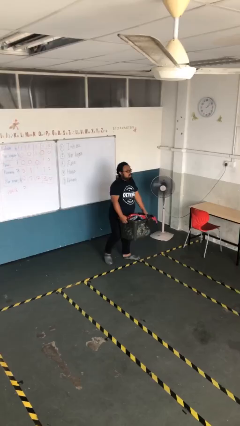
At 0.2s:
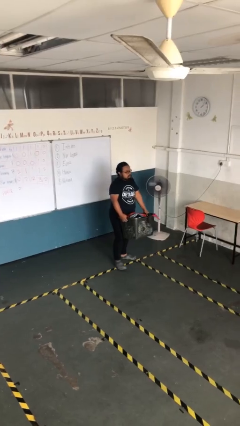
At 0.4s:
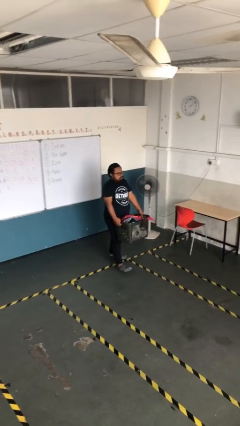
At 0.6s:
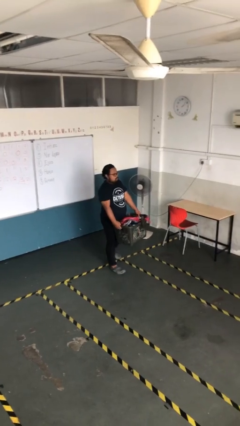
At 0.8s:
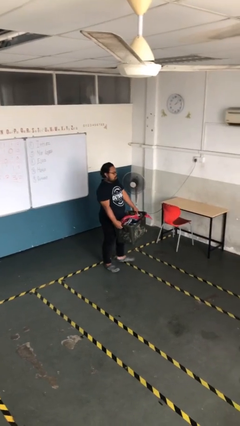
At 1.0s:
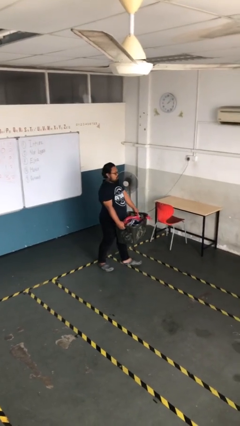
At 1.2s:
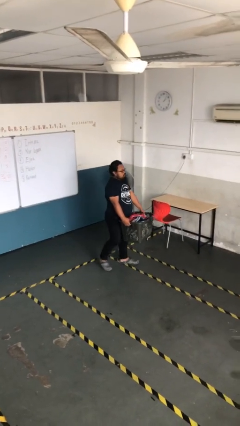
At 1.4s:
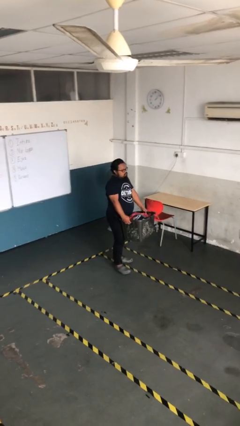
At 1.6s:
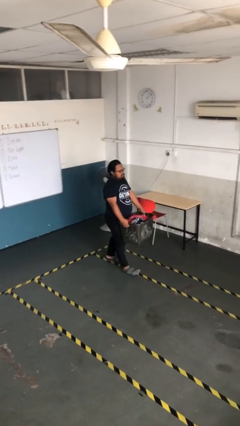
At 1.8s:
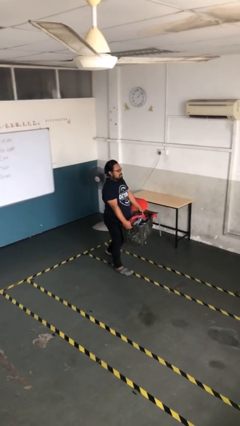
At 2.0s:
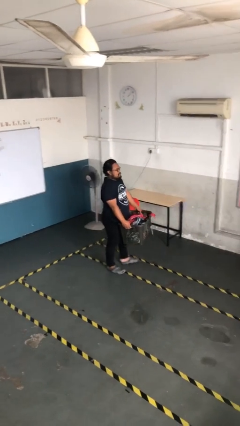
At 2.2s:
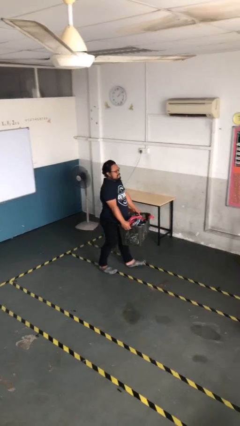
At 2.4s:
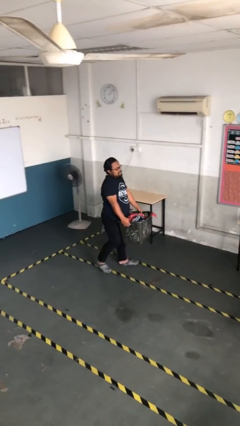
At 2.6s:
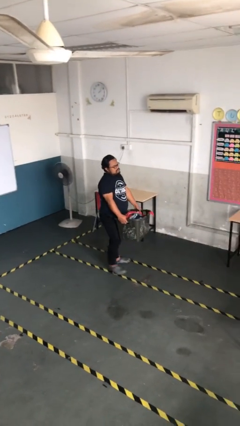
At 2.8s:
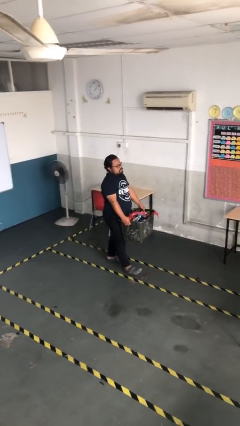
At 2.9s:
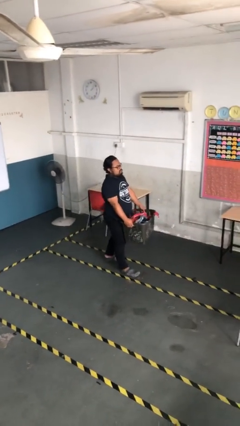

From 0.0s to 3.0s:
person carries heavy object

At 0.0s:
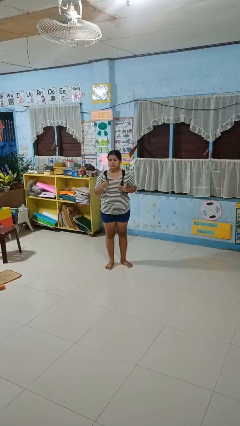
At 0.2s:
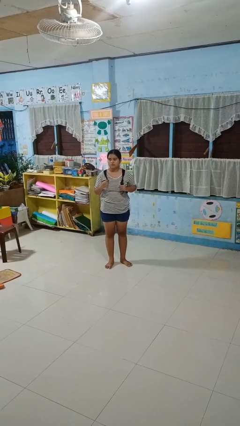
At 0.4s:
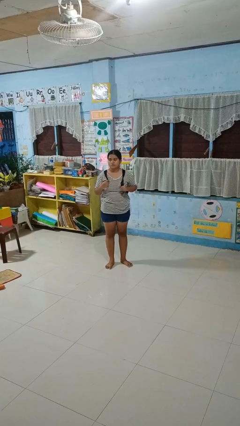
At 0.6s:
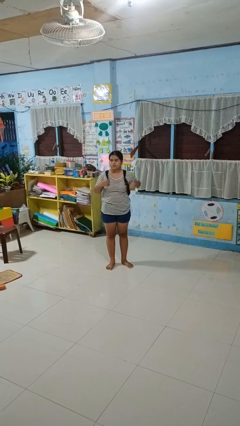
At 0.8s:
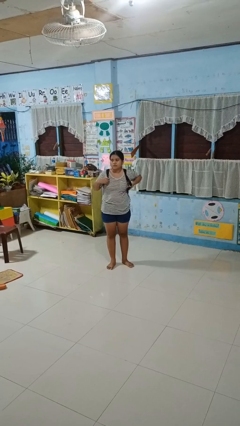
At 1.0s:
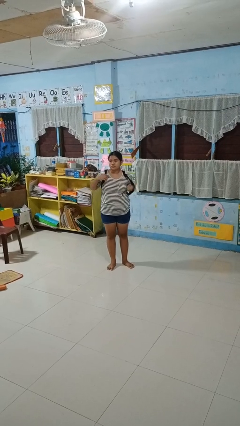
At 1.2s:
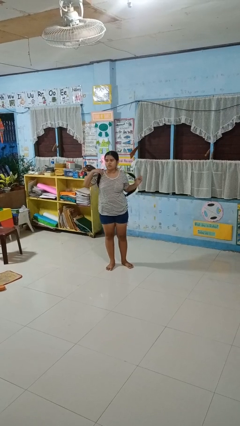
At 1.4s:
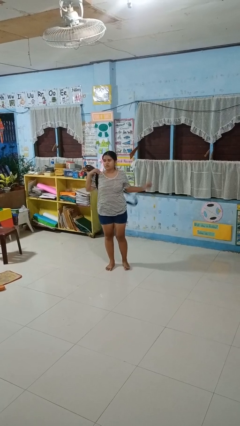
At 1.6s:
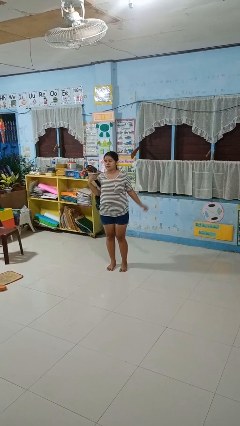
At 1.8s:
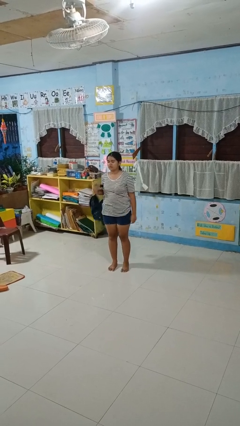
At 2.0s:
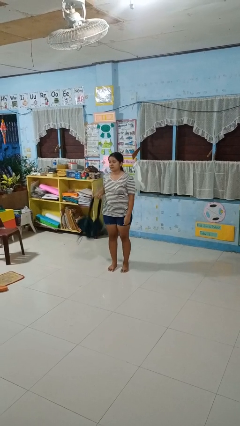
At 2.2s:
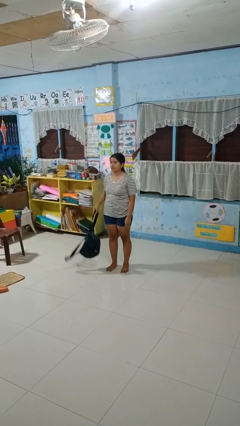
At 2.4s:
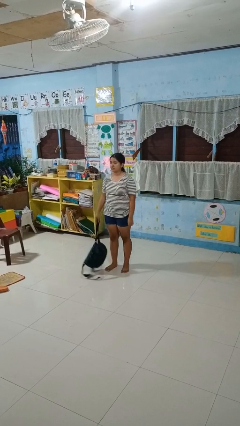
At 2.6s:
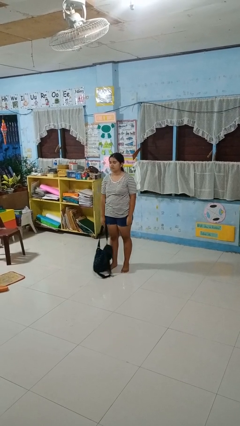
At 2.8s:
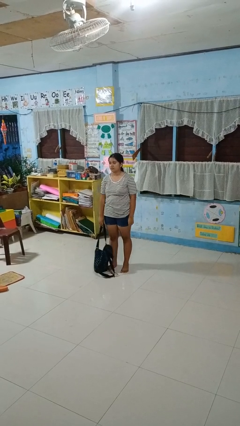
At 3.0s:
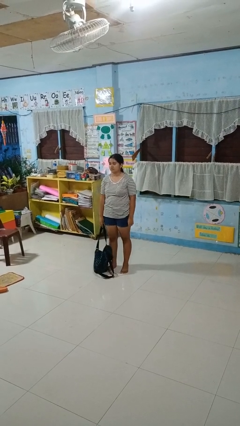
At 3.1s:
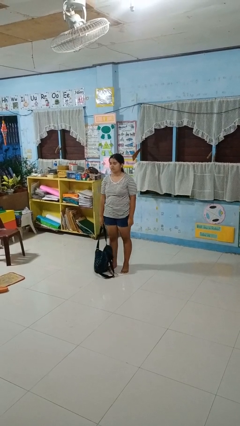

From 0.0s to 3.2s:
person takes off backpack

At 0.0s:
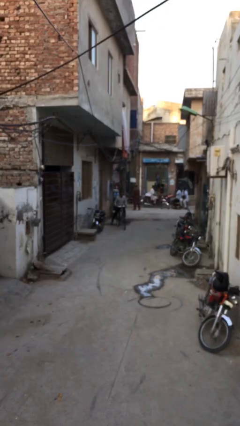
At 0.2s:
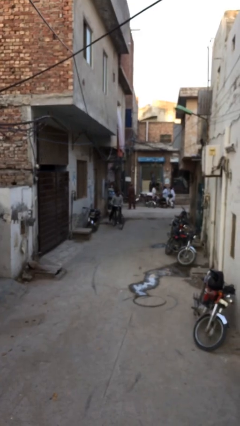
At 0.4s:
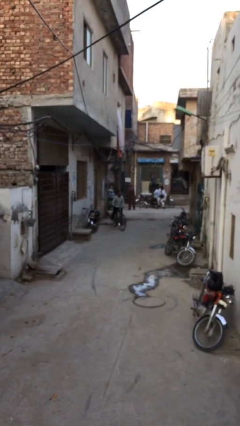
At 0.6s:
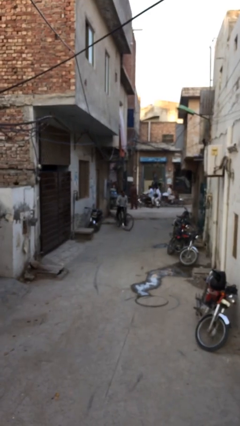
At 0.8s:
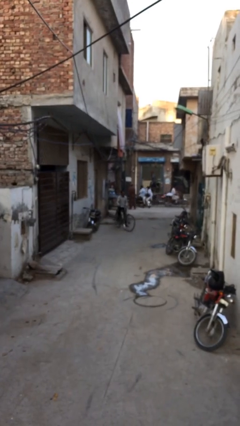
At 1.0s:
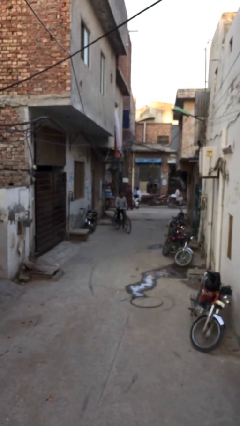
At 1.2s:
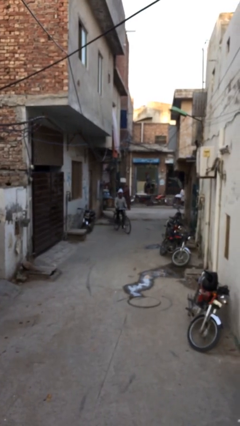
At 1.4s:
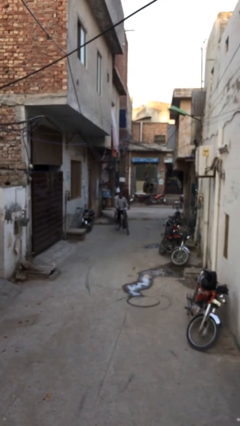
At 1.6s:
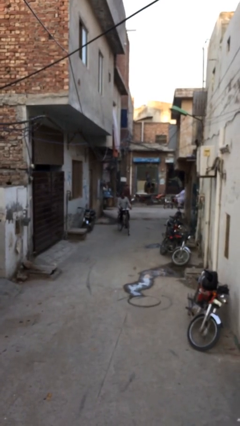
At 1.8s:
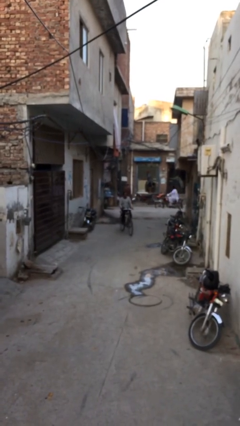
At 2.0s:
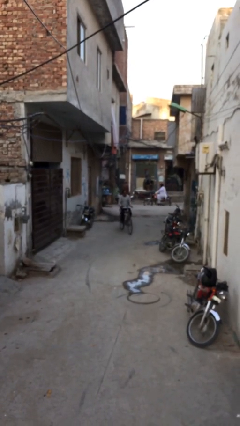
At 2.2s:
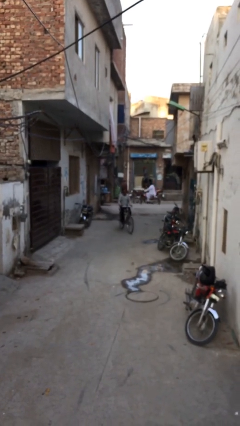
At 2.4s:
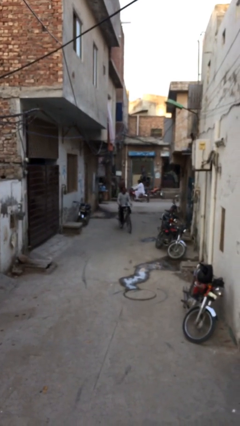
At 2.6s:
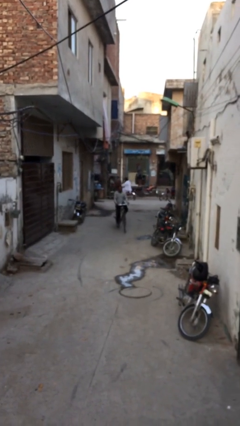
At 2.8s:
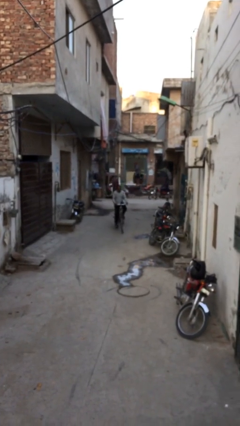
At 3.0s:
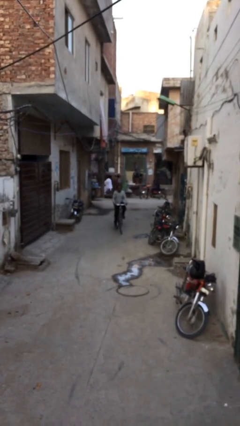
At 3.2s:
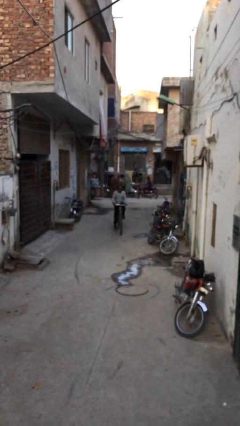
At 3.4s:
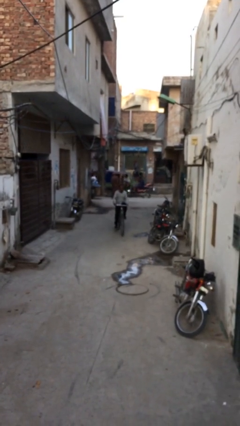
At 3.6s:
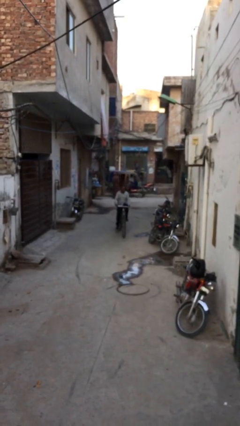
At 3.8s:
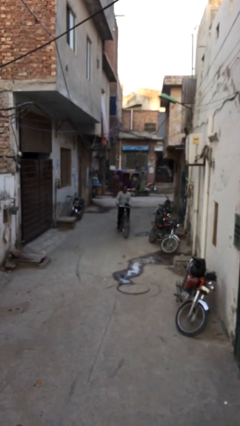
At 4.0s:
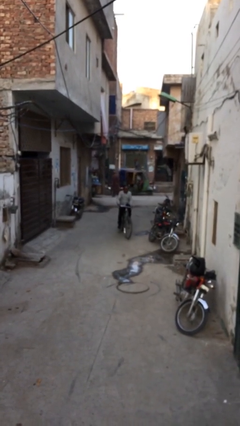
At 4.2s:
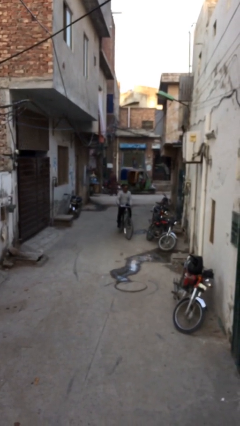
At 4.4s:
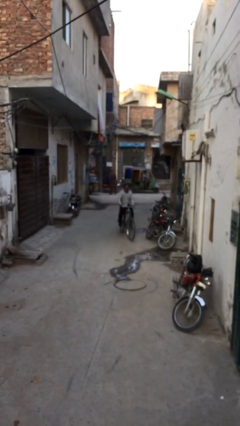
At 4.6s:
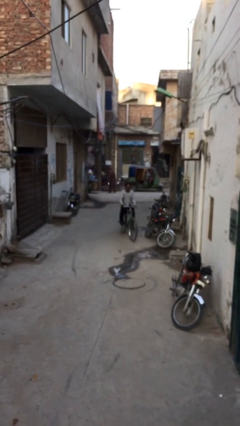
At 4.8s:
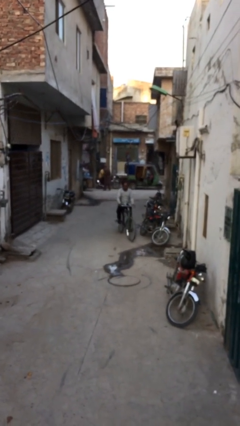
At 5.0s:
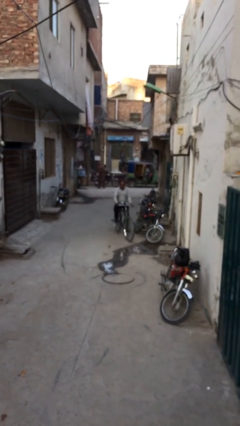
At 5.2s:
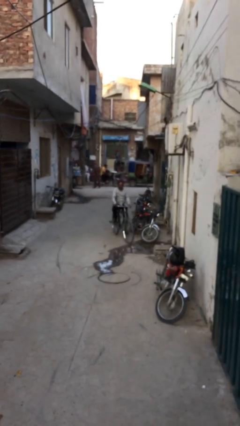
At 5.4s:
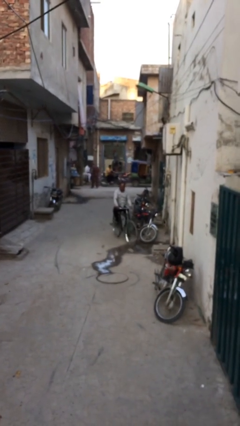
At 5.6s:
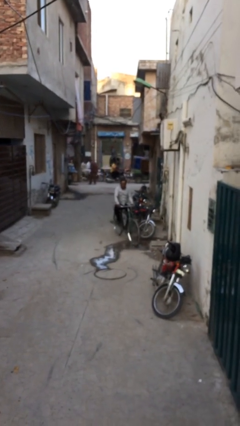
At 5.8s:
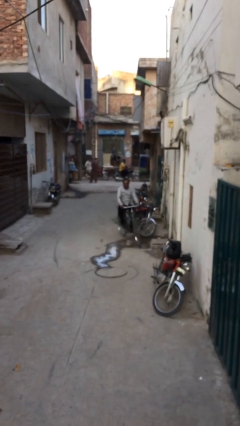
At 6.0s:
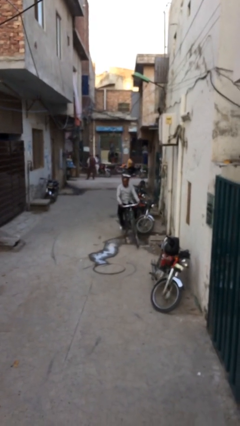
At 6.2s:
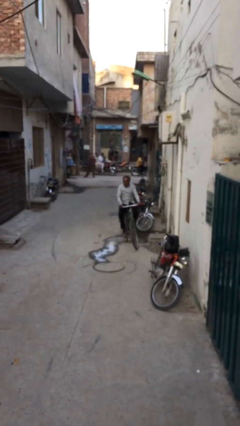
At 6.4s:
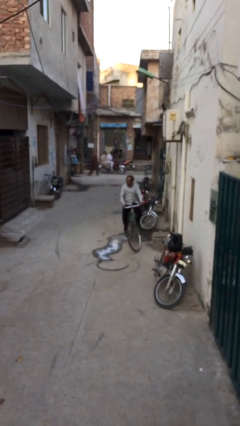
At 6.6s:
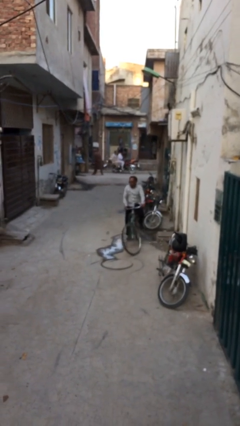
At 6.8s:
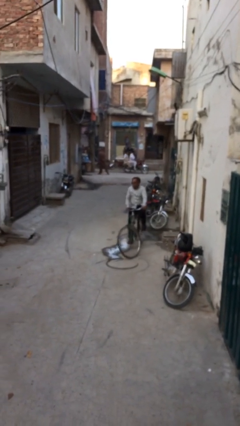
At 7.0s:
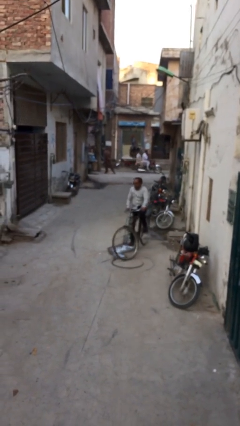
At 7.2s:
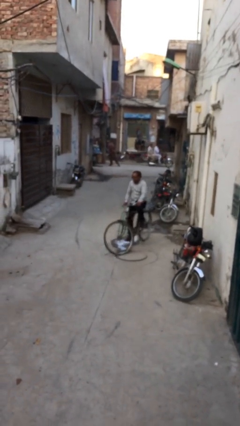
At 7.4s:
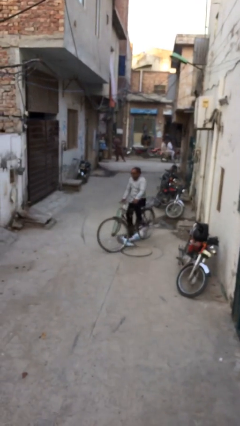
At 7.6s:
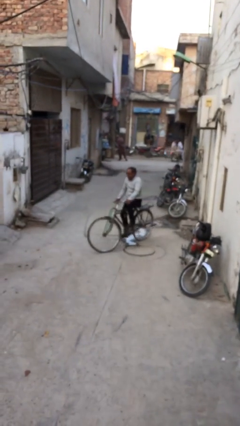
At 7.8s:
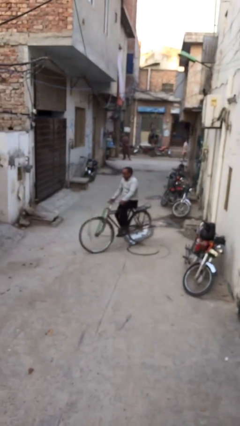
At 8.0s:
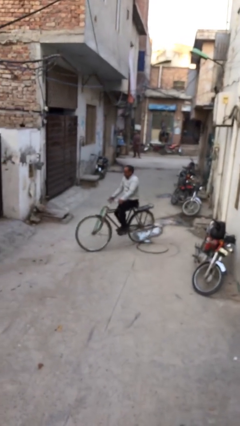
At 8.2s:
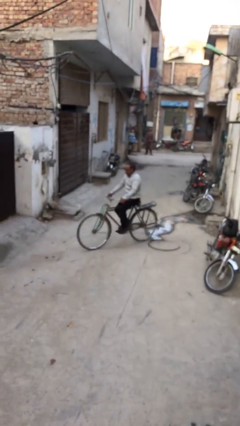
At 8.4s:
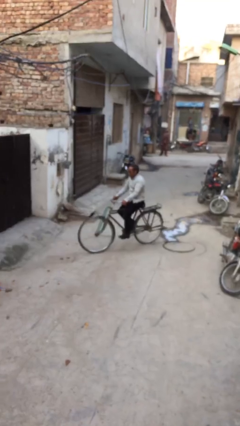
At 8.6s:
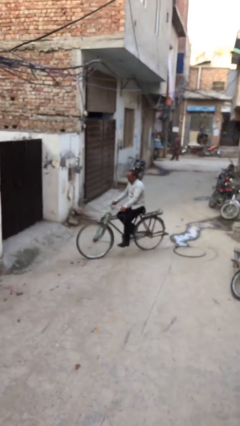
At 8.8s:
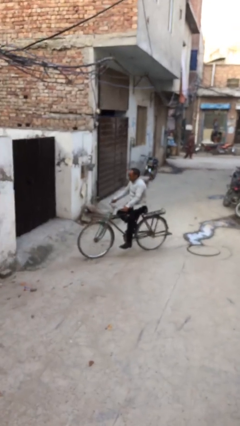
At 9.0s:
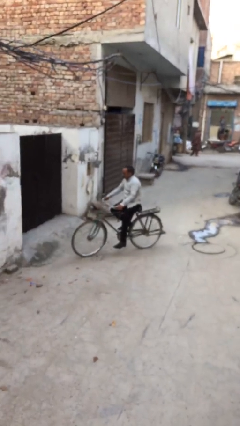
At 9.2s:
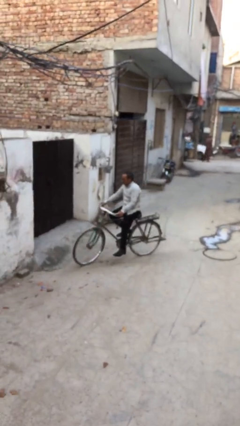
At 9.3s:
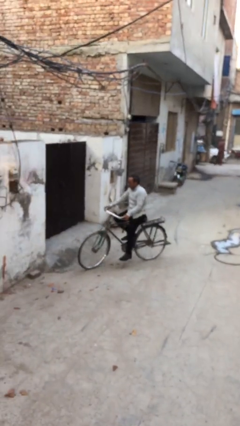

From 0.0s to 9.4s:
person rides bicycle

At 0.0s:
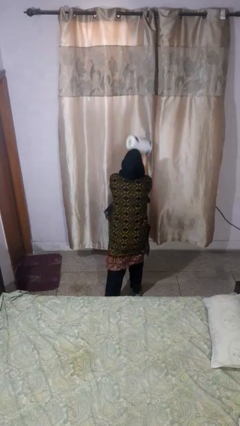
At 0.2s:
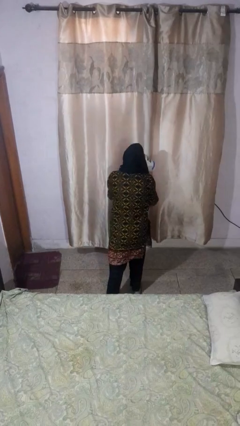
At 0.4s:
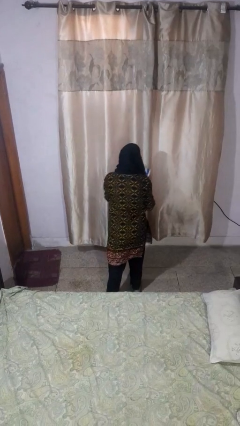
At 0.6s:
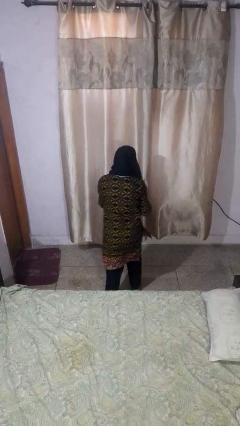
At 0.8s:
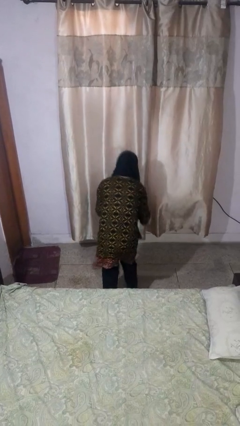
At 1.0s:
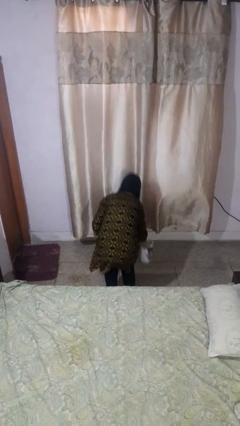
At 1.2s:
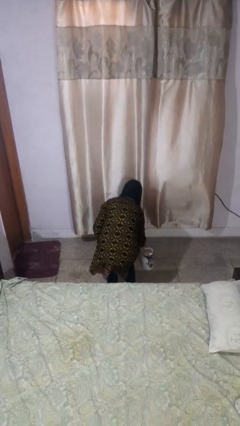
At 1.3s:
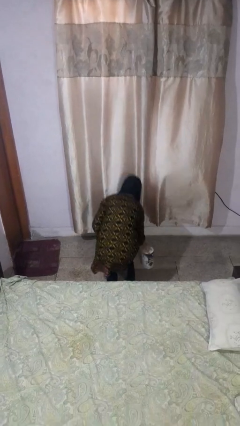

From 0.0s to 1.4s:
person catches dropped object

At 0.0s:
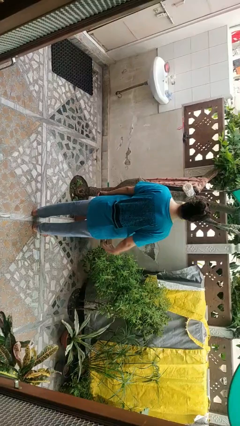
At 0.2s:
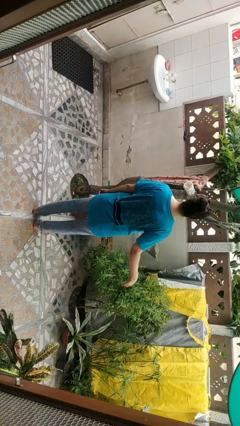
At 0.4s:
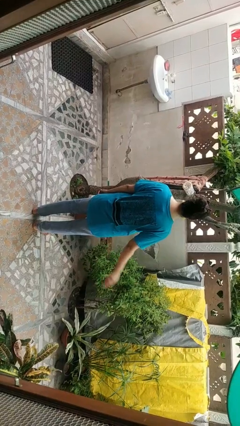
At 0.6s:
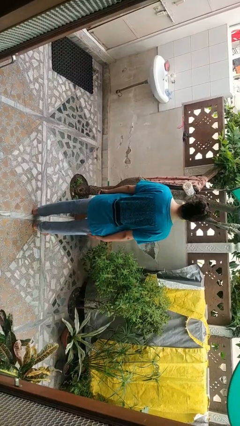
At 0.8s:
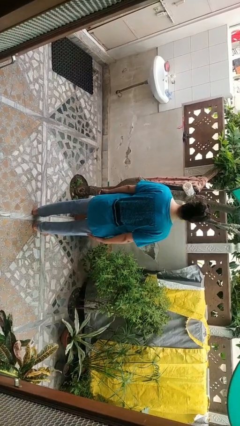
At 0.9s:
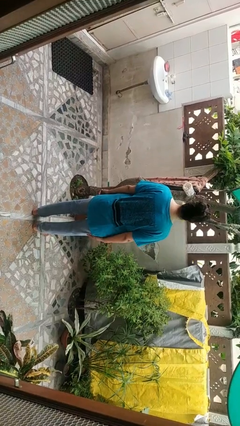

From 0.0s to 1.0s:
person slaps hands on thighs
